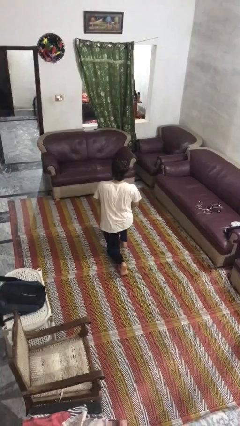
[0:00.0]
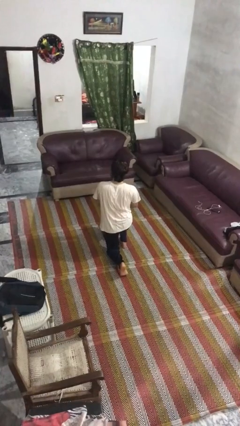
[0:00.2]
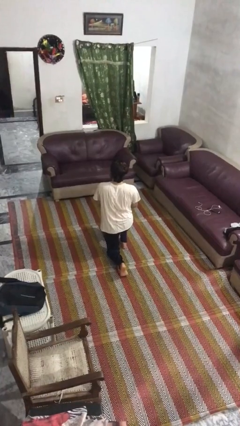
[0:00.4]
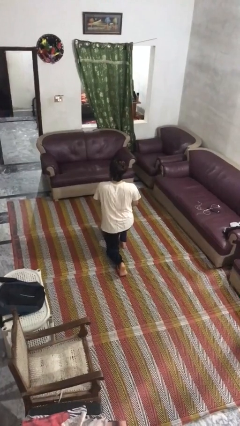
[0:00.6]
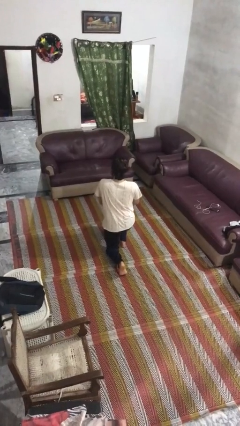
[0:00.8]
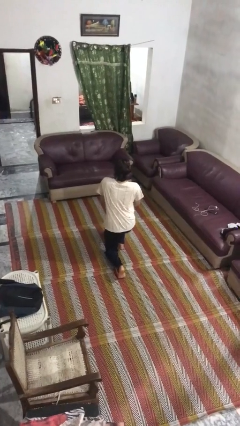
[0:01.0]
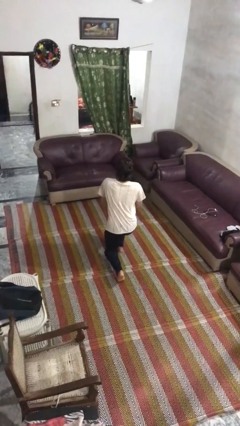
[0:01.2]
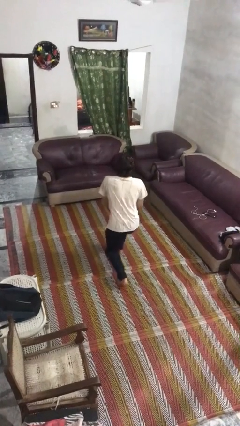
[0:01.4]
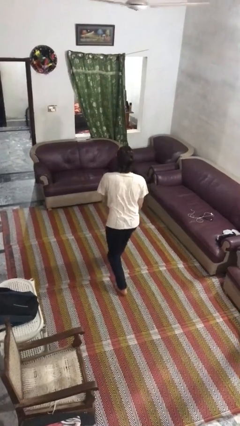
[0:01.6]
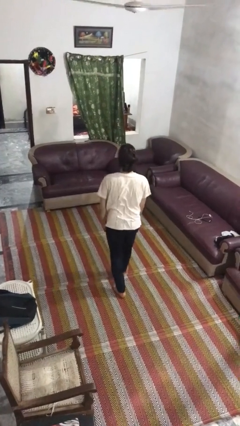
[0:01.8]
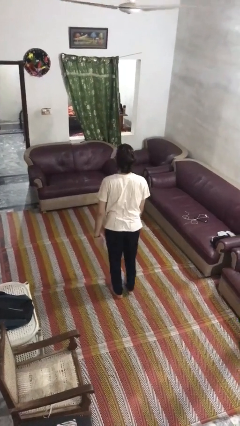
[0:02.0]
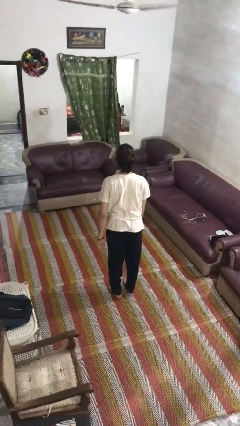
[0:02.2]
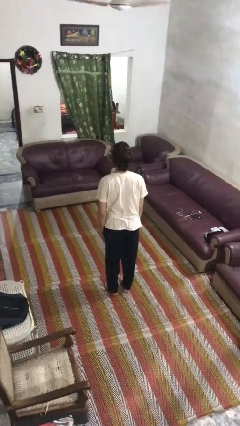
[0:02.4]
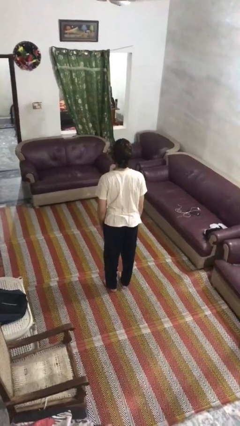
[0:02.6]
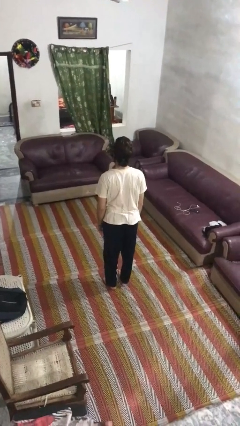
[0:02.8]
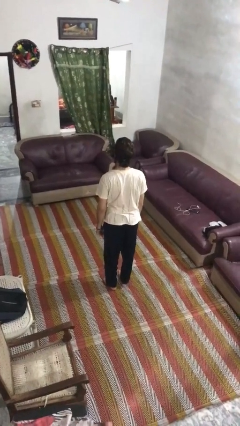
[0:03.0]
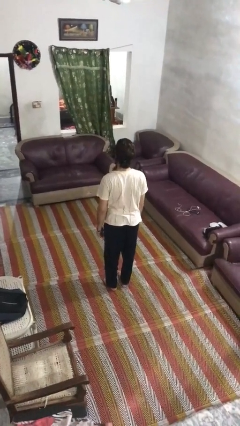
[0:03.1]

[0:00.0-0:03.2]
person stands up from floor

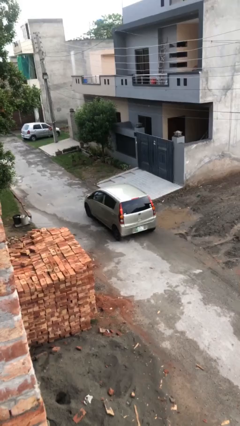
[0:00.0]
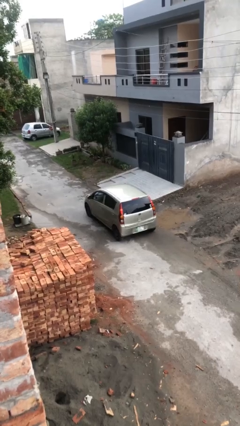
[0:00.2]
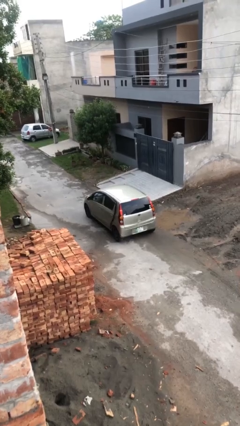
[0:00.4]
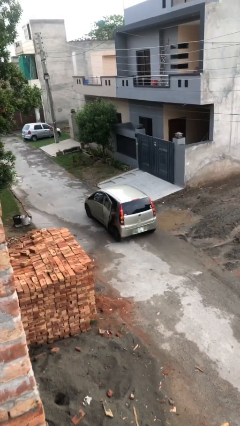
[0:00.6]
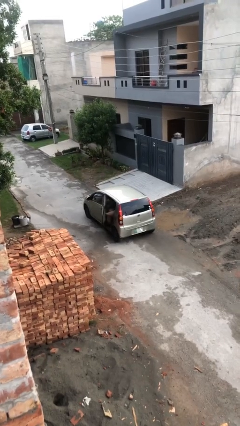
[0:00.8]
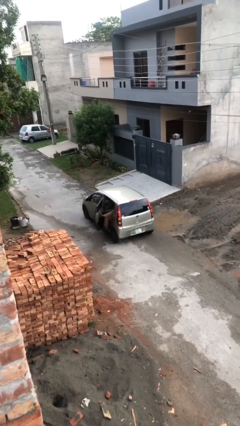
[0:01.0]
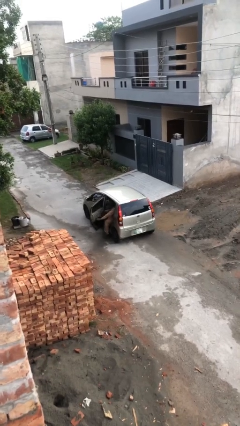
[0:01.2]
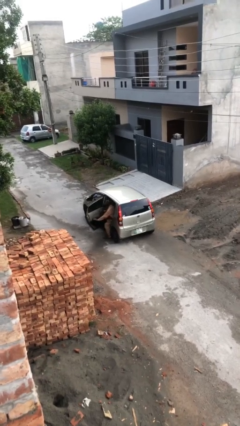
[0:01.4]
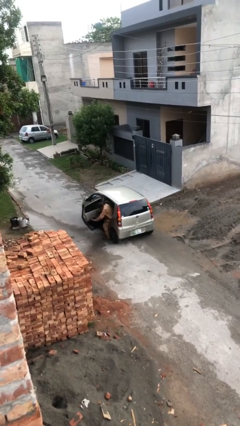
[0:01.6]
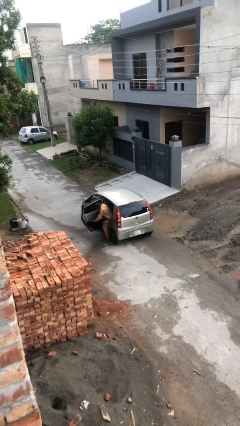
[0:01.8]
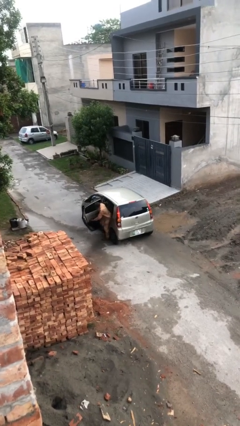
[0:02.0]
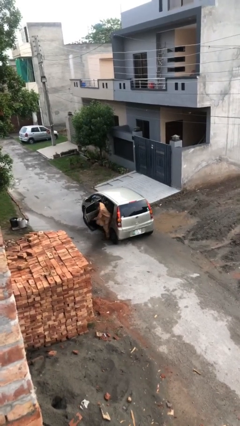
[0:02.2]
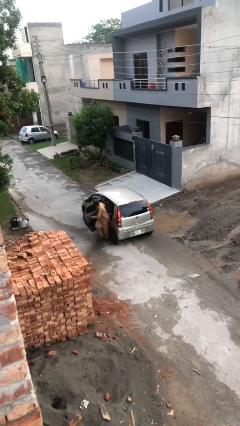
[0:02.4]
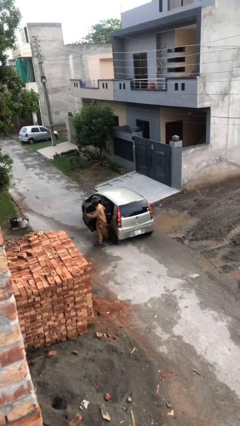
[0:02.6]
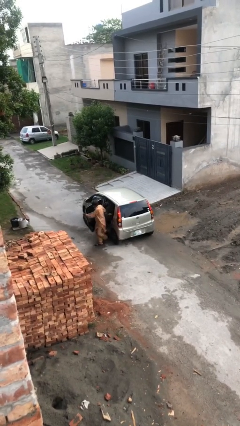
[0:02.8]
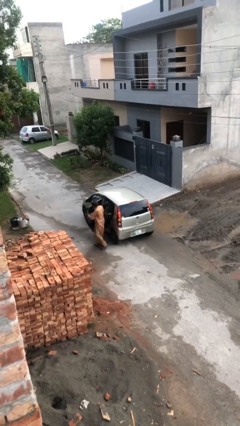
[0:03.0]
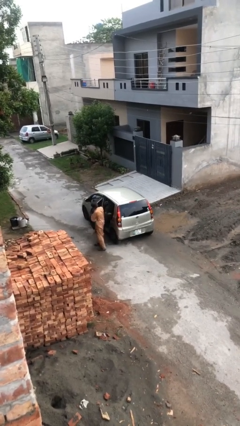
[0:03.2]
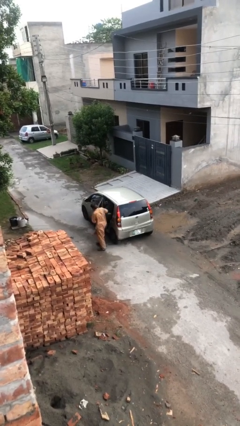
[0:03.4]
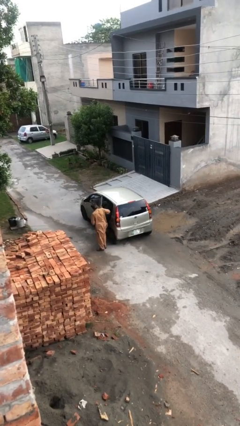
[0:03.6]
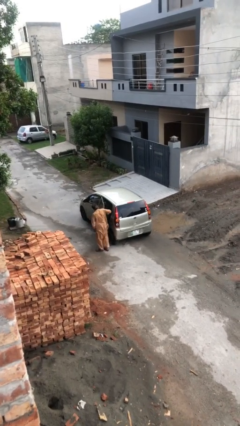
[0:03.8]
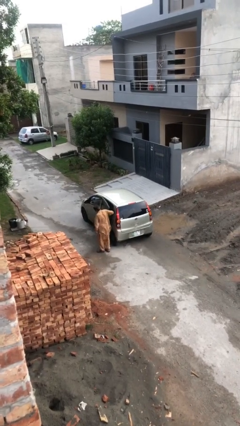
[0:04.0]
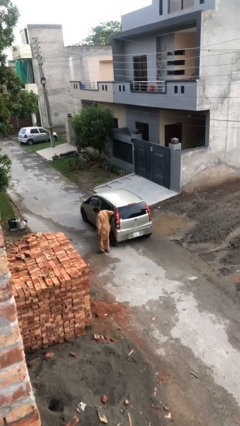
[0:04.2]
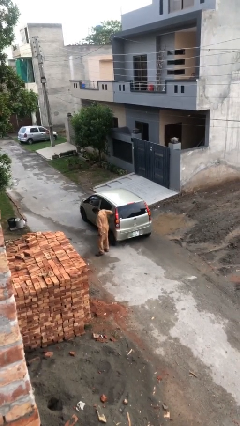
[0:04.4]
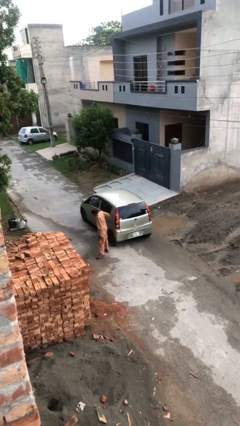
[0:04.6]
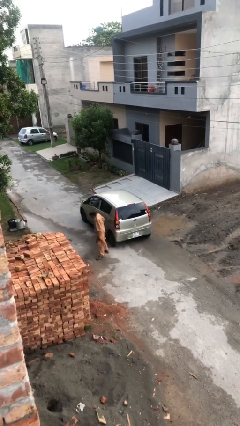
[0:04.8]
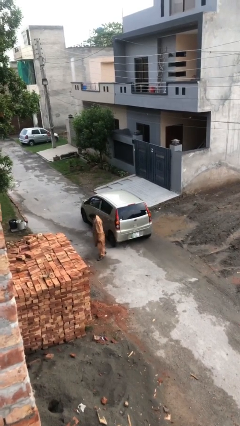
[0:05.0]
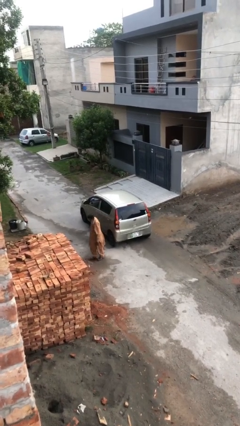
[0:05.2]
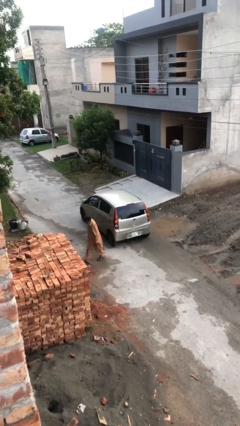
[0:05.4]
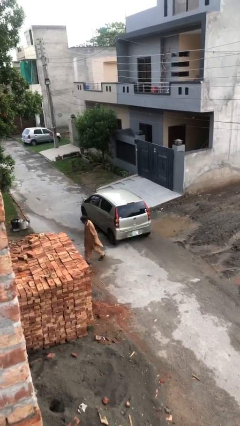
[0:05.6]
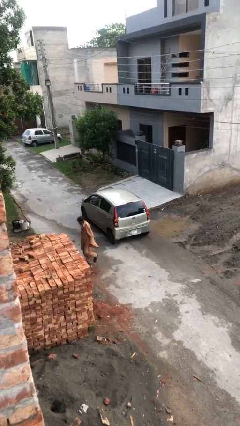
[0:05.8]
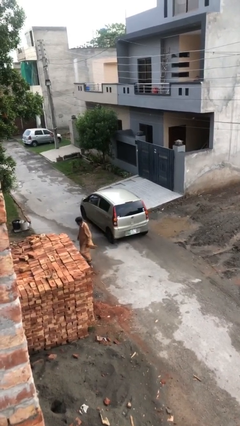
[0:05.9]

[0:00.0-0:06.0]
car drops off person

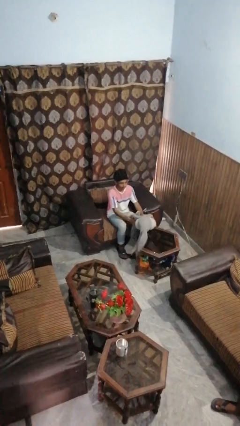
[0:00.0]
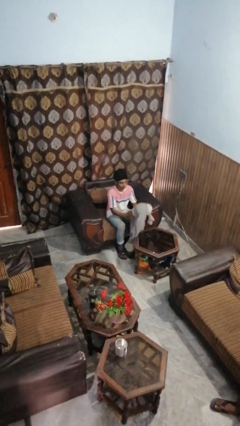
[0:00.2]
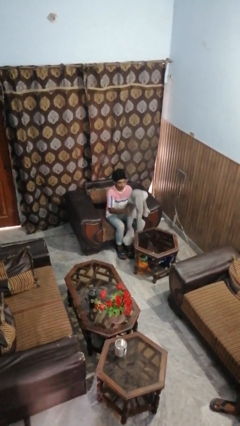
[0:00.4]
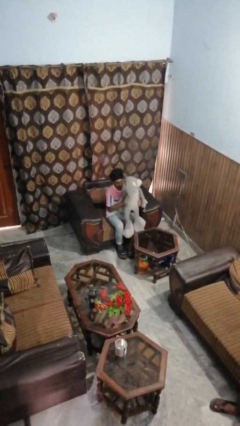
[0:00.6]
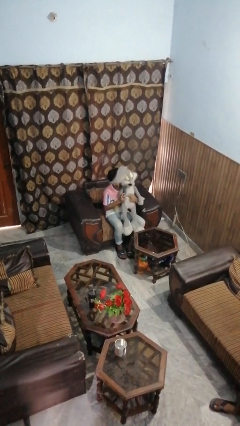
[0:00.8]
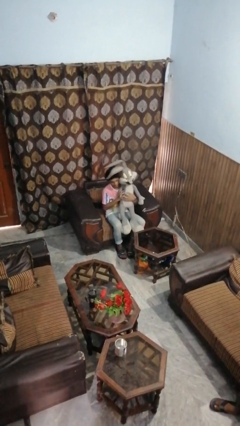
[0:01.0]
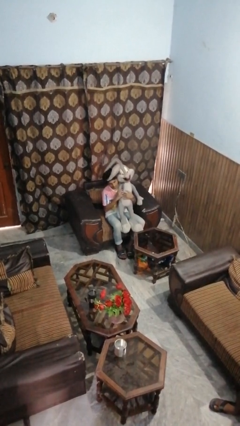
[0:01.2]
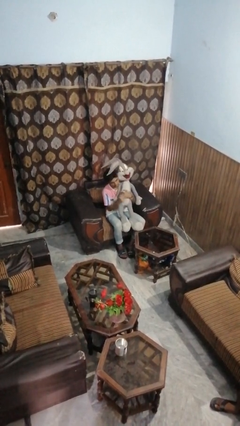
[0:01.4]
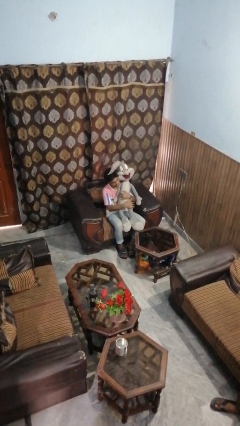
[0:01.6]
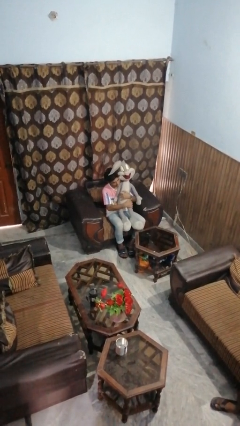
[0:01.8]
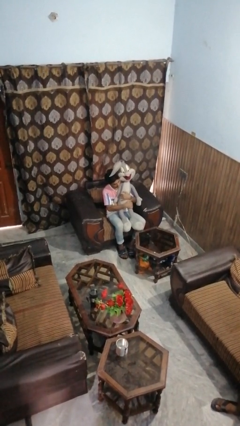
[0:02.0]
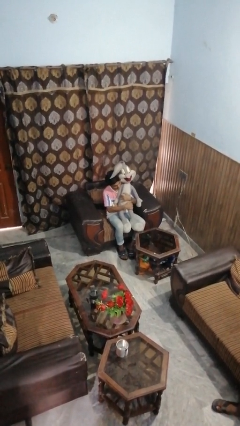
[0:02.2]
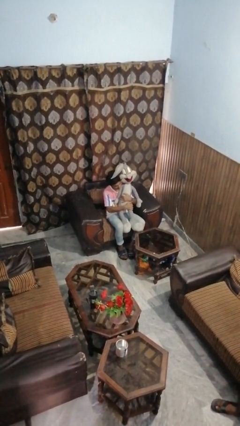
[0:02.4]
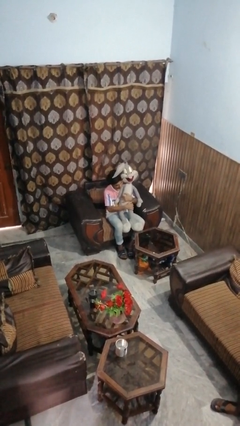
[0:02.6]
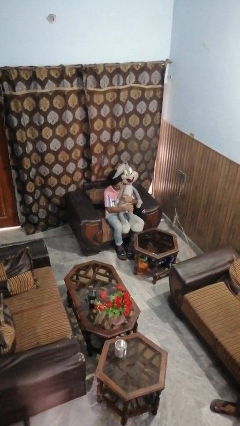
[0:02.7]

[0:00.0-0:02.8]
person hugs stuffed animal

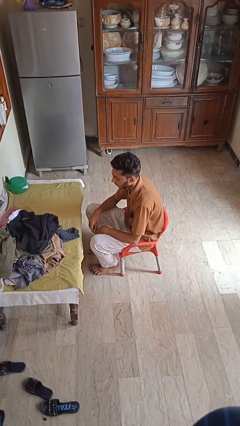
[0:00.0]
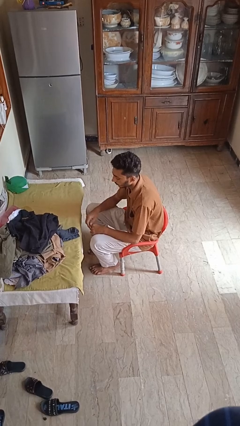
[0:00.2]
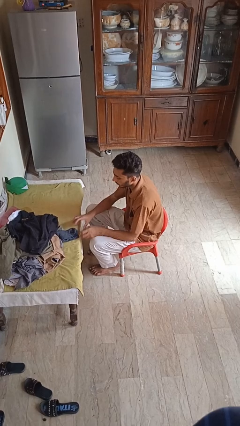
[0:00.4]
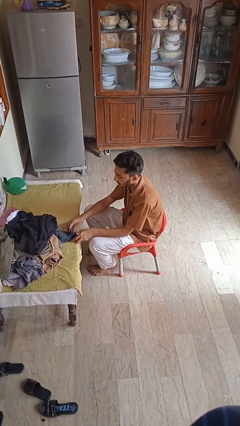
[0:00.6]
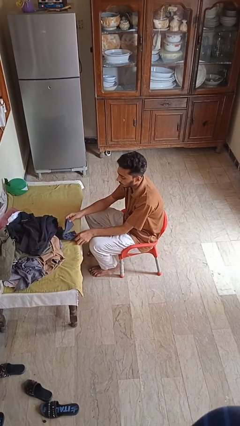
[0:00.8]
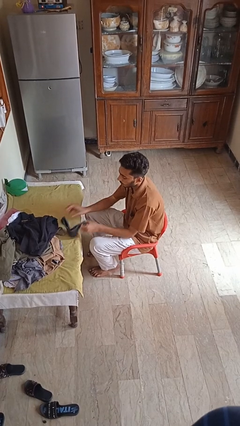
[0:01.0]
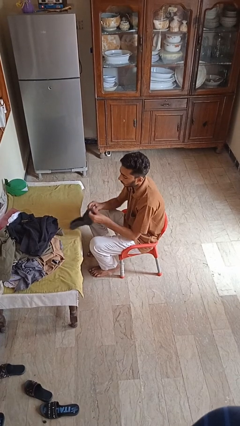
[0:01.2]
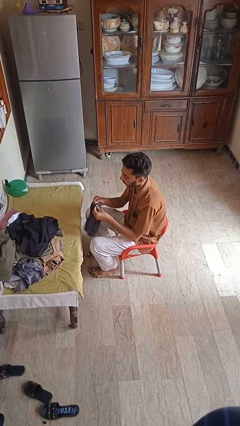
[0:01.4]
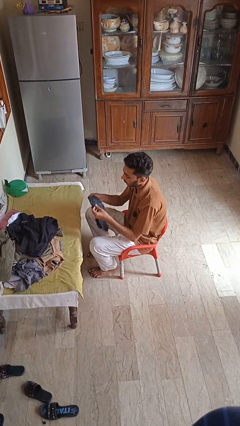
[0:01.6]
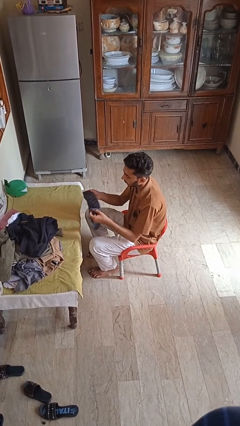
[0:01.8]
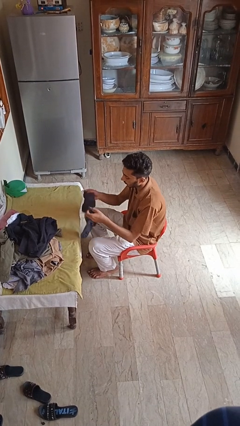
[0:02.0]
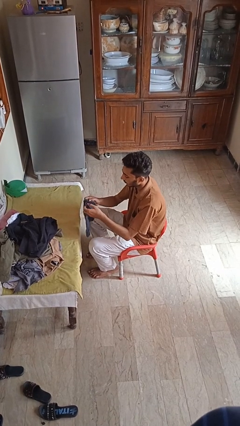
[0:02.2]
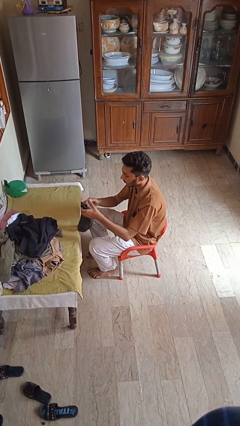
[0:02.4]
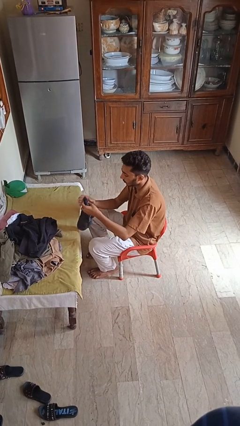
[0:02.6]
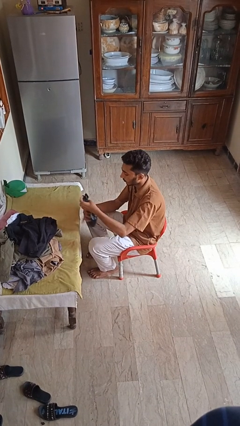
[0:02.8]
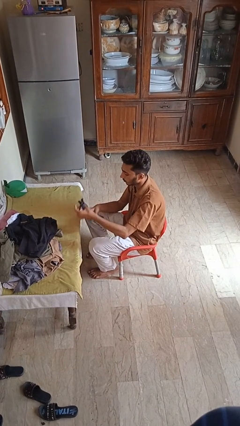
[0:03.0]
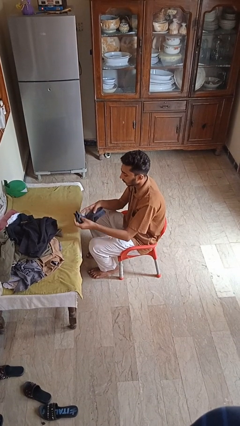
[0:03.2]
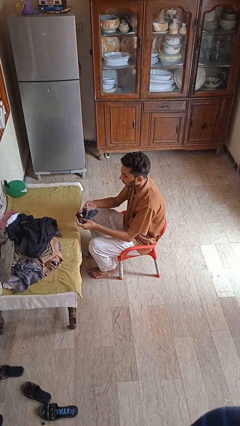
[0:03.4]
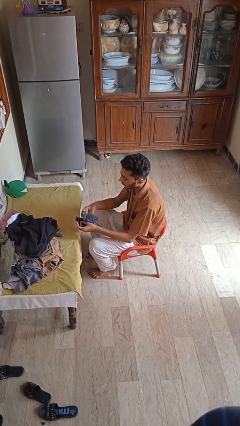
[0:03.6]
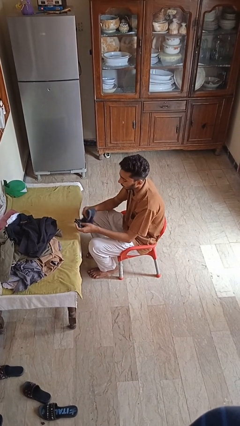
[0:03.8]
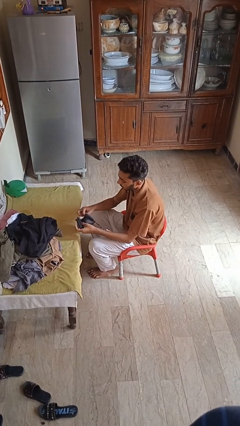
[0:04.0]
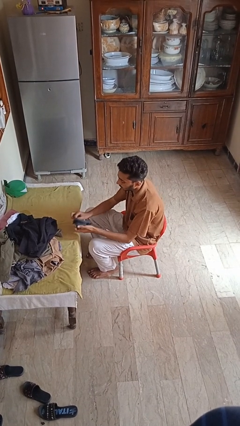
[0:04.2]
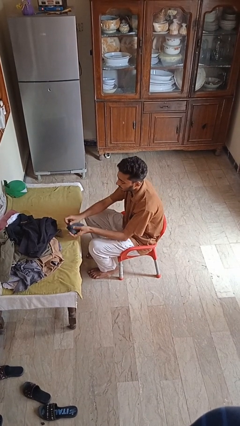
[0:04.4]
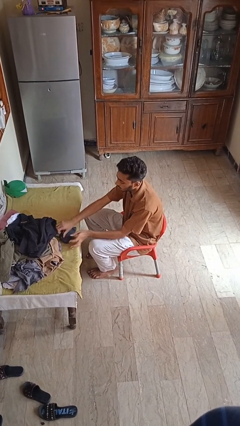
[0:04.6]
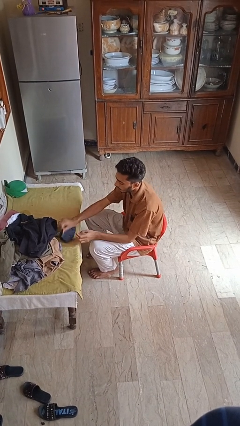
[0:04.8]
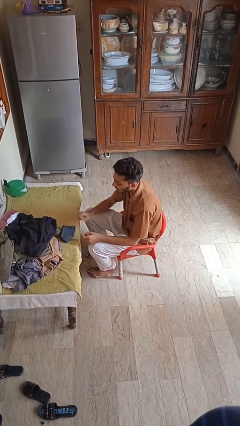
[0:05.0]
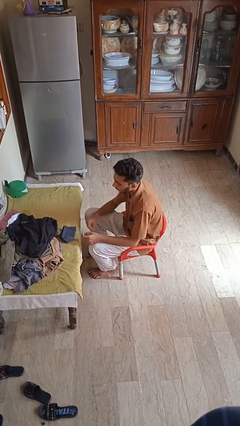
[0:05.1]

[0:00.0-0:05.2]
person folds socks
